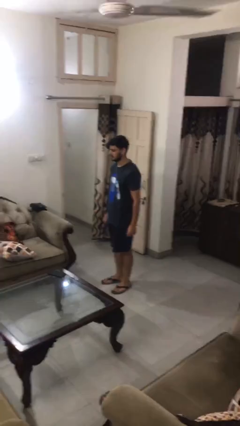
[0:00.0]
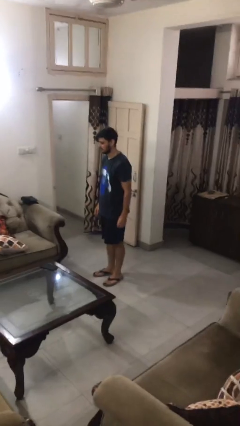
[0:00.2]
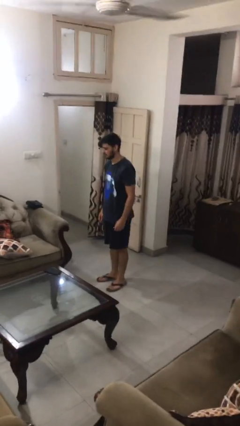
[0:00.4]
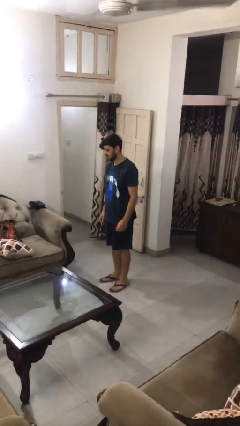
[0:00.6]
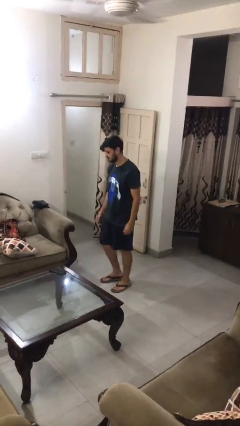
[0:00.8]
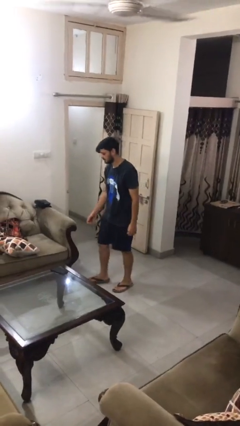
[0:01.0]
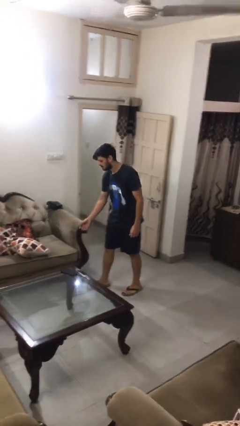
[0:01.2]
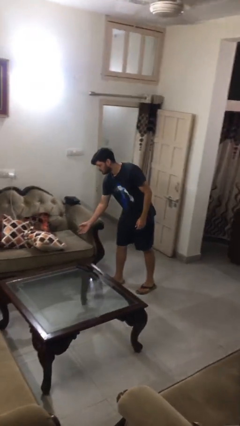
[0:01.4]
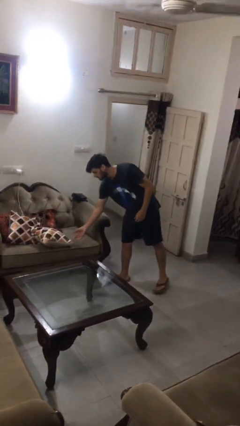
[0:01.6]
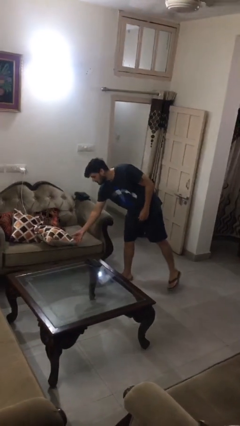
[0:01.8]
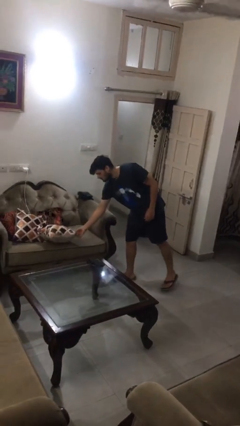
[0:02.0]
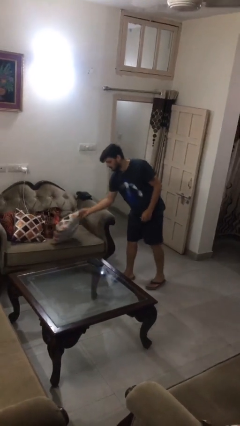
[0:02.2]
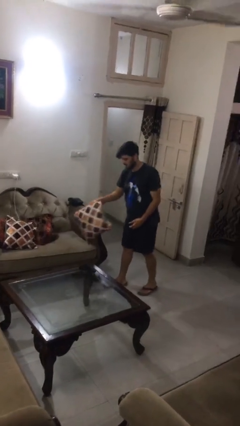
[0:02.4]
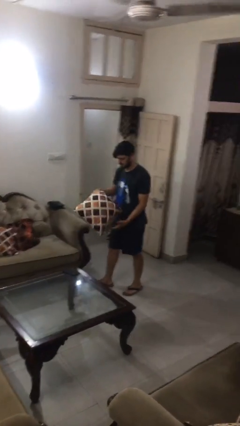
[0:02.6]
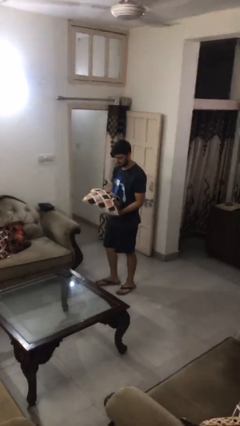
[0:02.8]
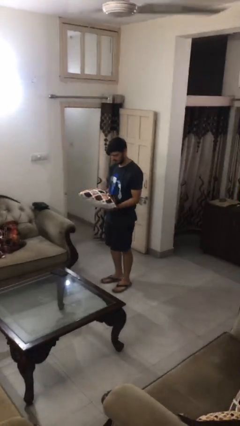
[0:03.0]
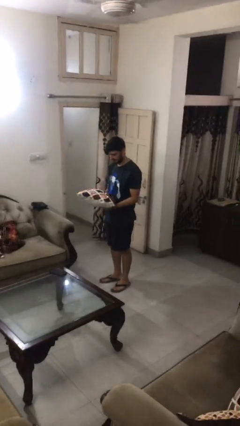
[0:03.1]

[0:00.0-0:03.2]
person picks up object from couch

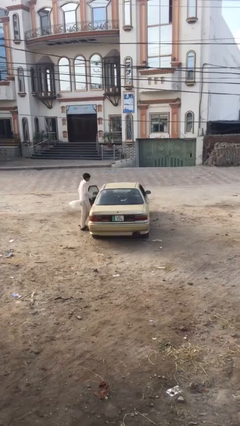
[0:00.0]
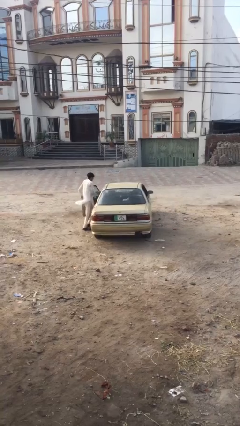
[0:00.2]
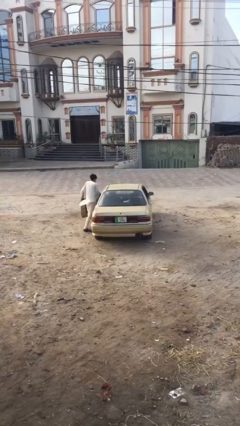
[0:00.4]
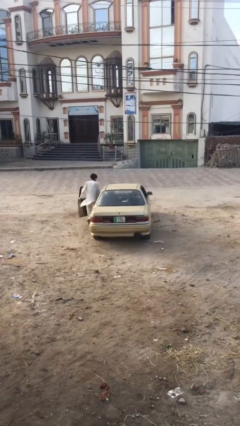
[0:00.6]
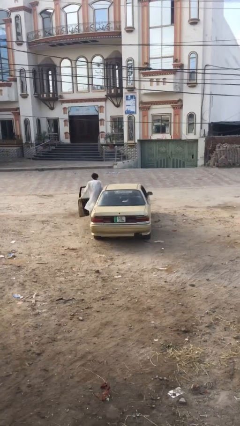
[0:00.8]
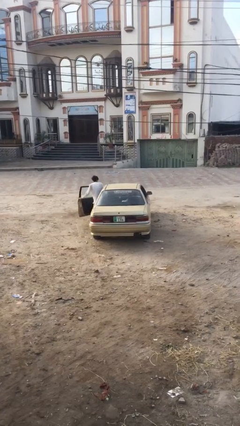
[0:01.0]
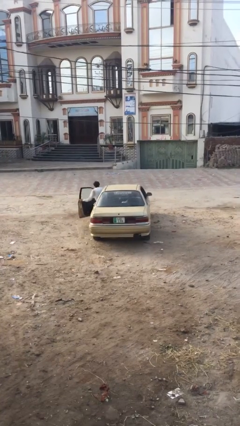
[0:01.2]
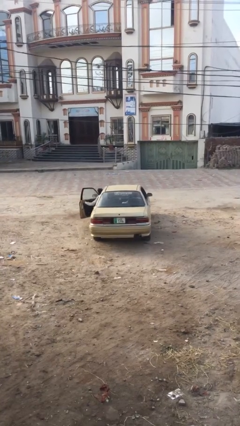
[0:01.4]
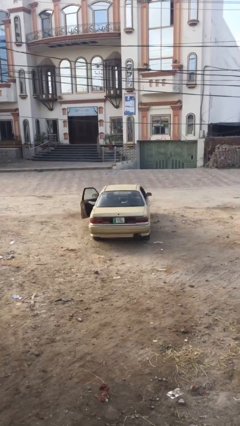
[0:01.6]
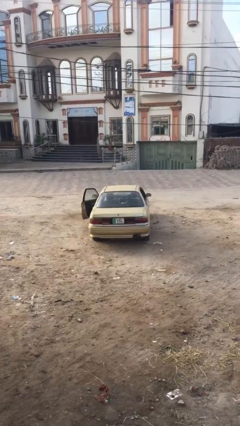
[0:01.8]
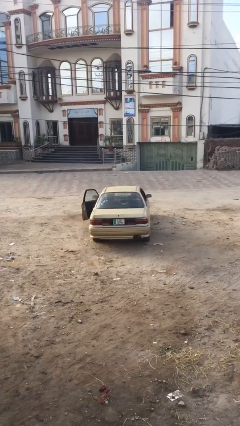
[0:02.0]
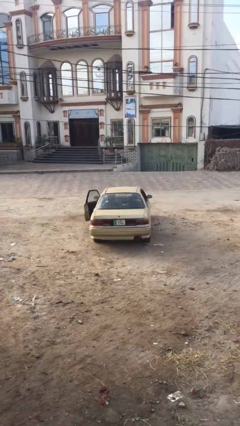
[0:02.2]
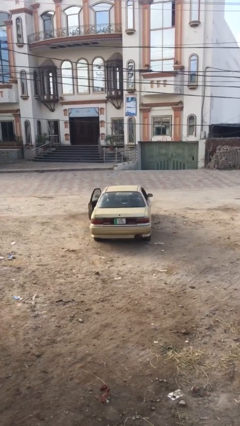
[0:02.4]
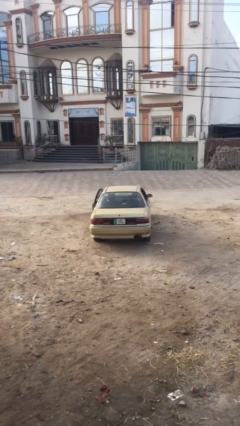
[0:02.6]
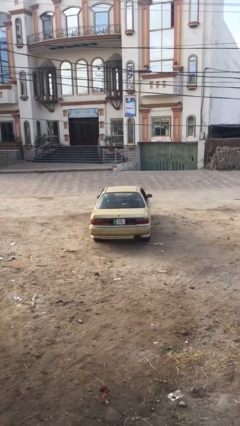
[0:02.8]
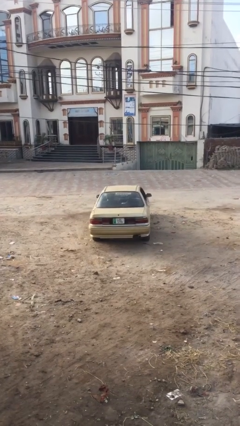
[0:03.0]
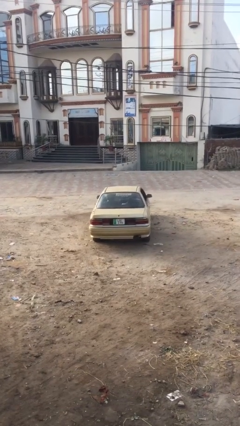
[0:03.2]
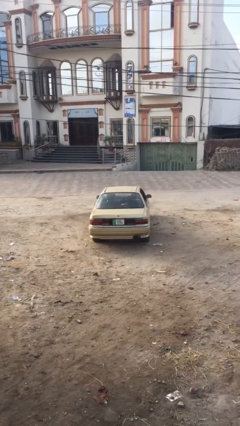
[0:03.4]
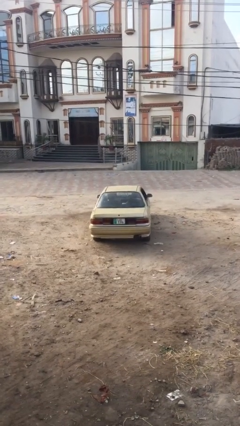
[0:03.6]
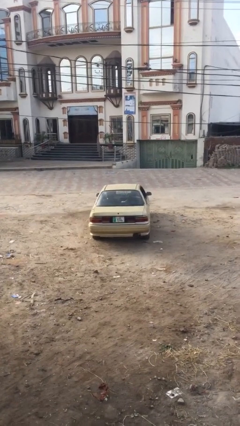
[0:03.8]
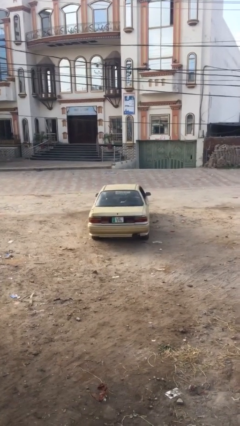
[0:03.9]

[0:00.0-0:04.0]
car picks up person

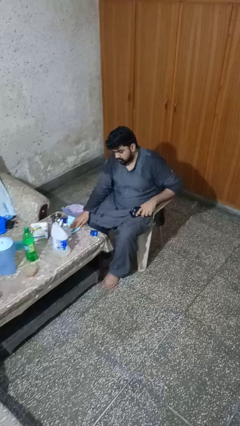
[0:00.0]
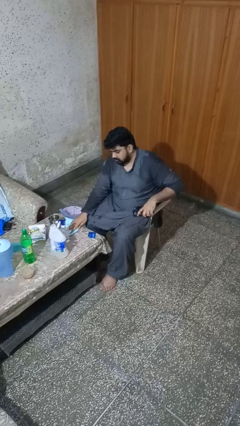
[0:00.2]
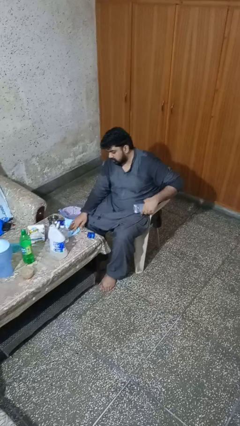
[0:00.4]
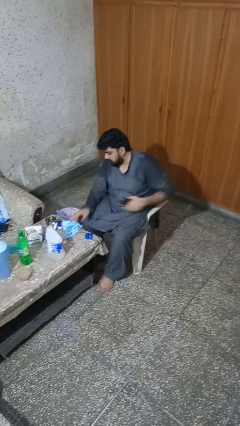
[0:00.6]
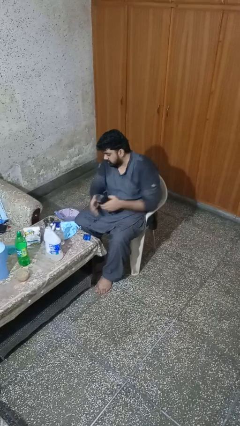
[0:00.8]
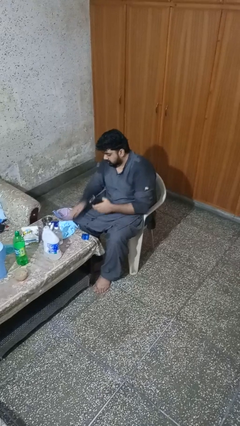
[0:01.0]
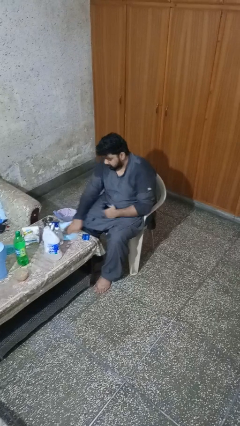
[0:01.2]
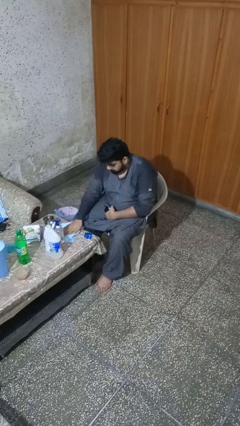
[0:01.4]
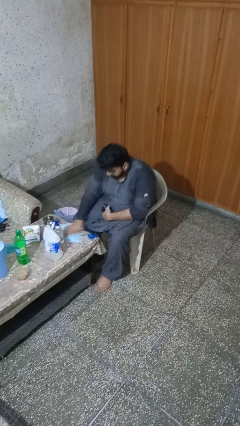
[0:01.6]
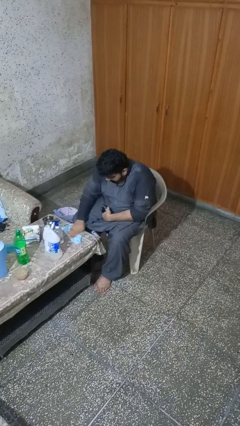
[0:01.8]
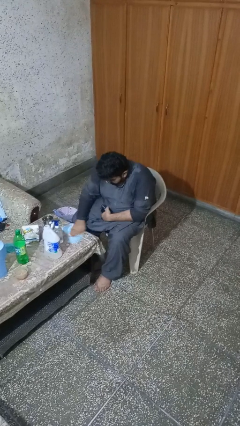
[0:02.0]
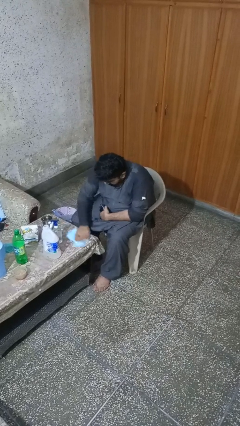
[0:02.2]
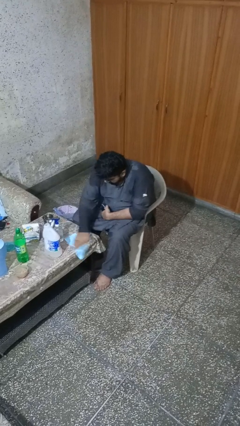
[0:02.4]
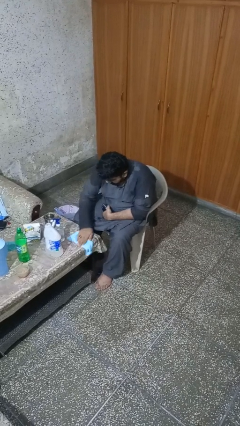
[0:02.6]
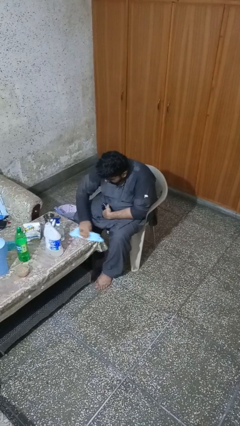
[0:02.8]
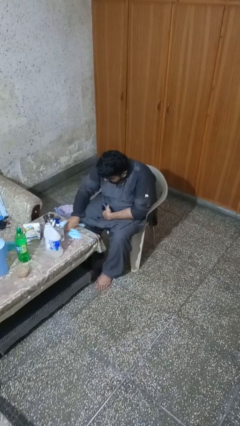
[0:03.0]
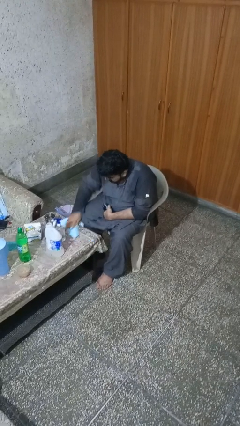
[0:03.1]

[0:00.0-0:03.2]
person cleans table with rag

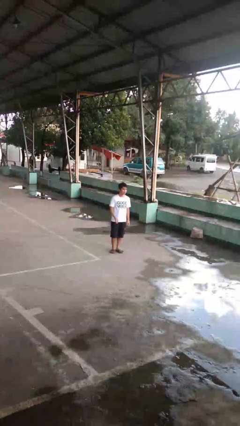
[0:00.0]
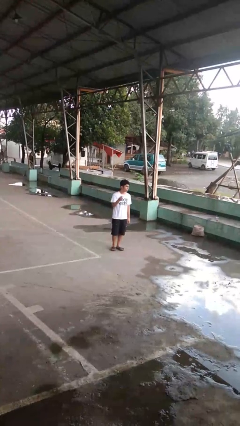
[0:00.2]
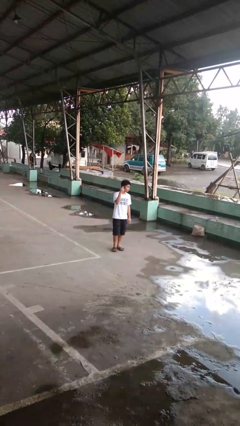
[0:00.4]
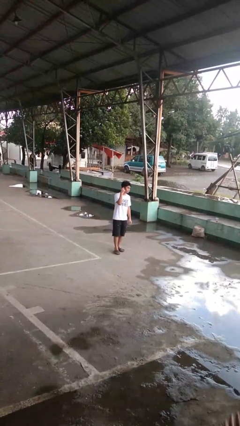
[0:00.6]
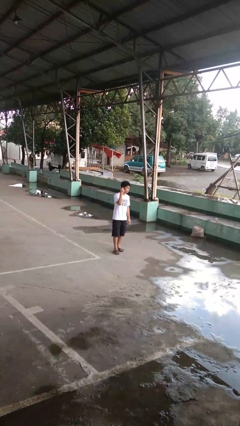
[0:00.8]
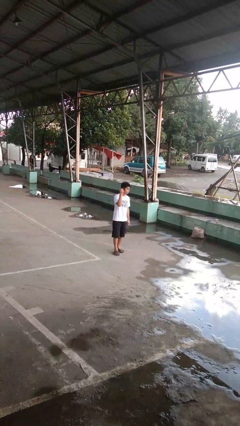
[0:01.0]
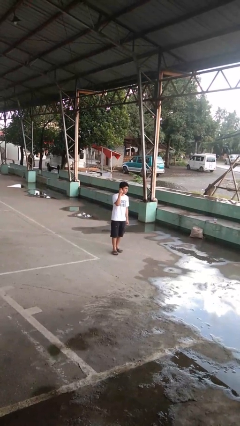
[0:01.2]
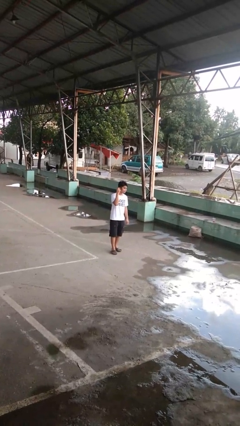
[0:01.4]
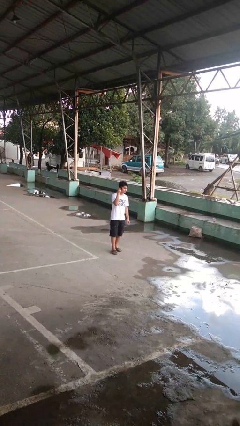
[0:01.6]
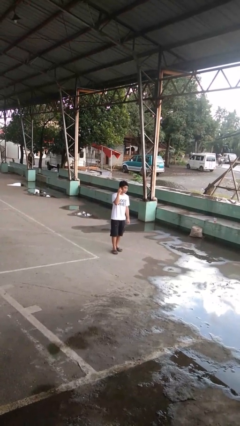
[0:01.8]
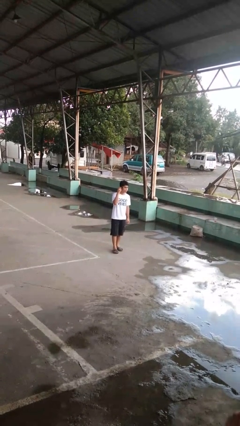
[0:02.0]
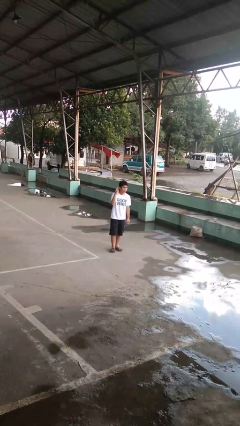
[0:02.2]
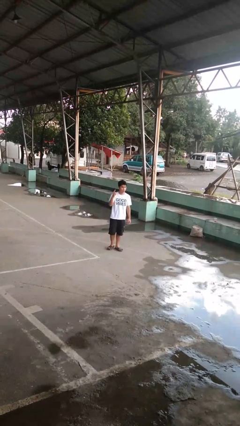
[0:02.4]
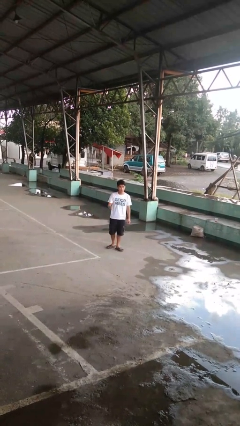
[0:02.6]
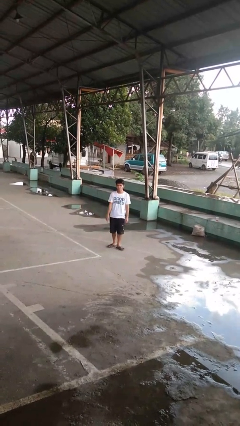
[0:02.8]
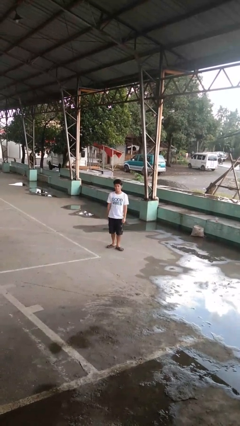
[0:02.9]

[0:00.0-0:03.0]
person gestures listen closely

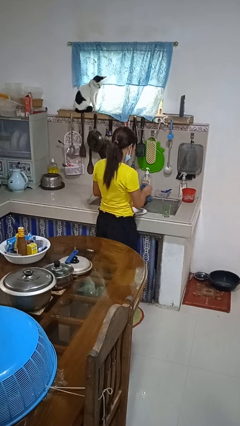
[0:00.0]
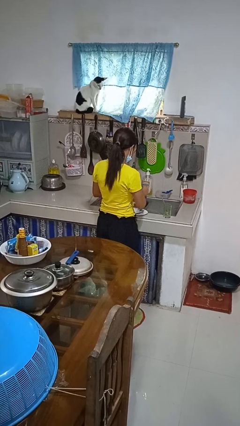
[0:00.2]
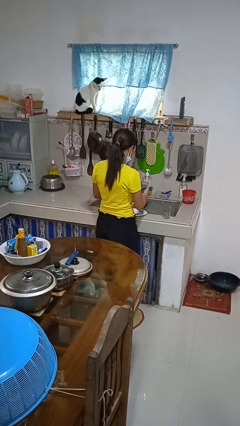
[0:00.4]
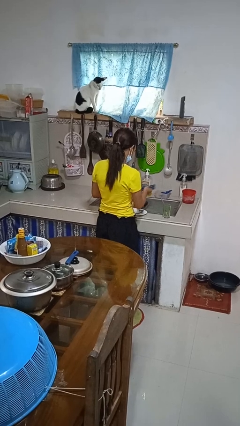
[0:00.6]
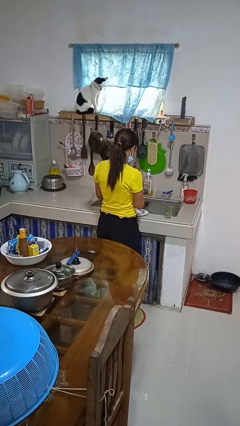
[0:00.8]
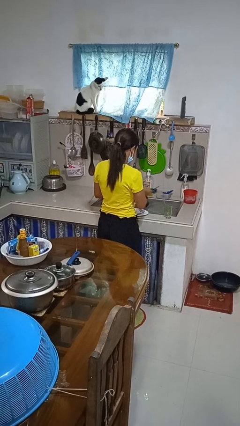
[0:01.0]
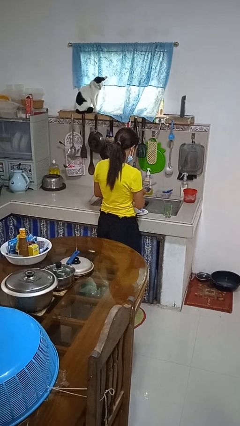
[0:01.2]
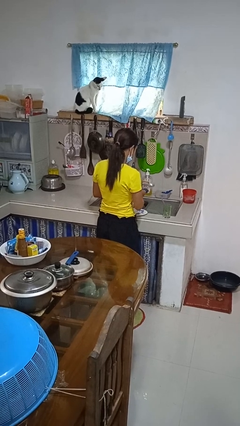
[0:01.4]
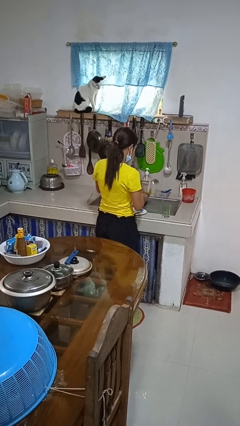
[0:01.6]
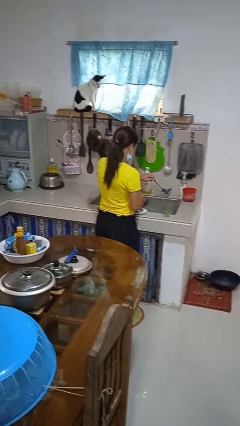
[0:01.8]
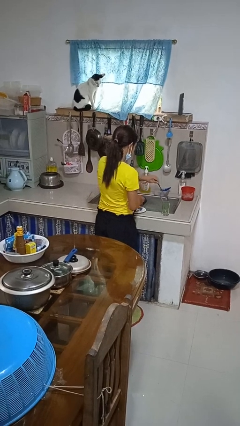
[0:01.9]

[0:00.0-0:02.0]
person dries dish

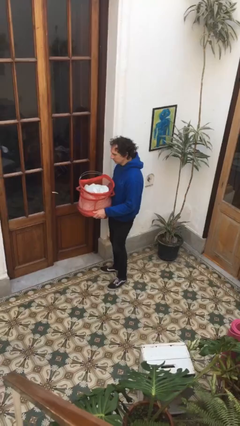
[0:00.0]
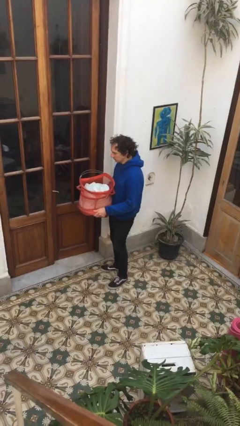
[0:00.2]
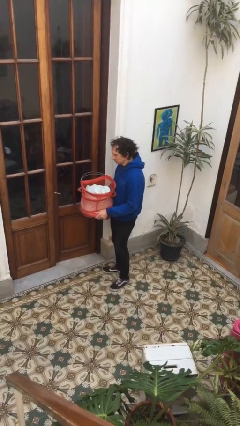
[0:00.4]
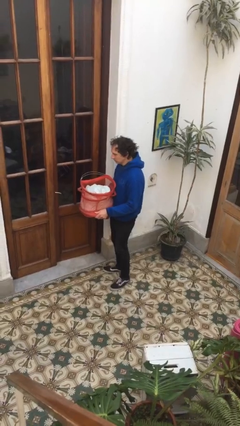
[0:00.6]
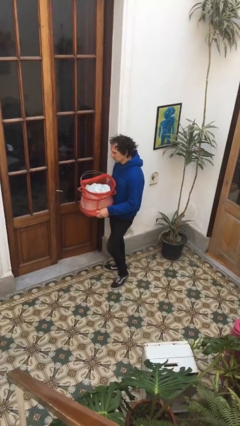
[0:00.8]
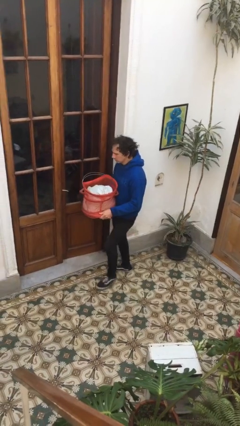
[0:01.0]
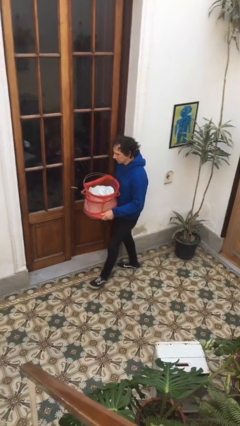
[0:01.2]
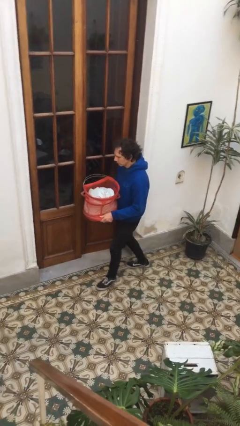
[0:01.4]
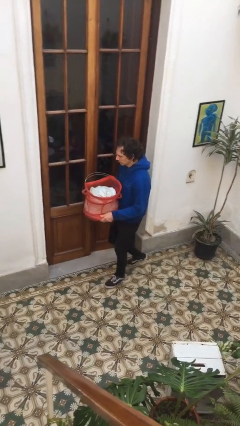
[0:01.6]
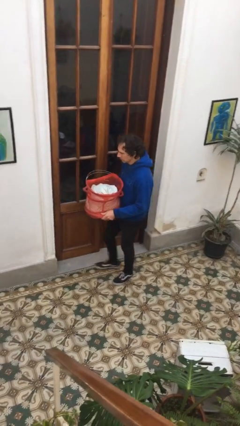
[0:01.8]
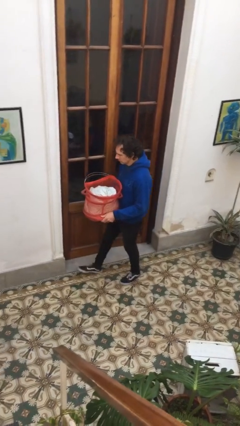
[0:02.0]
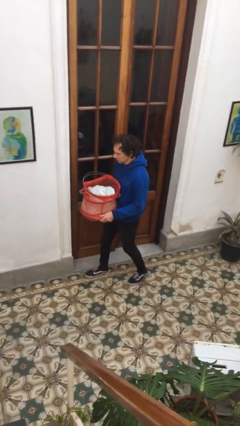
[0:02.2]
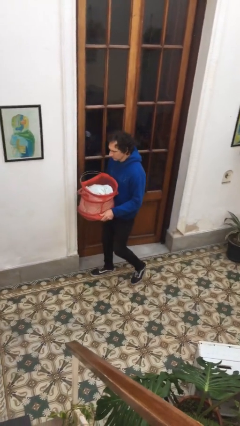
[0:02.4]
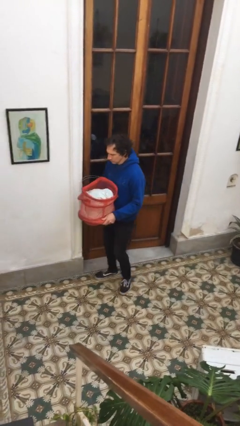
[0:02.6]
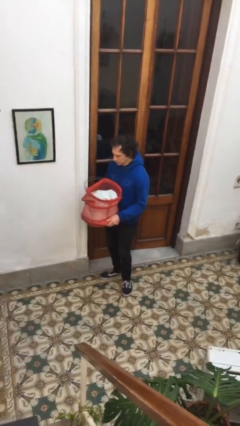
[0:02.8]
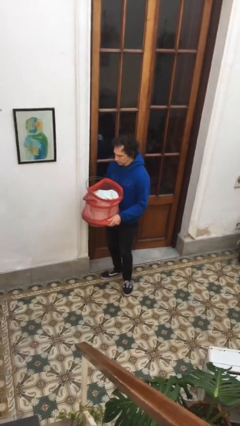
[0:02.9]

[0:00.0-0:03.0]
person carries laundry basket
